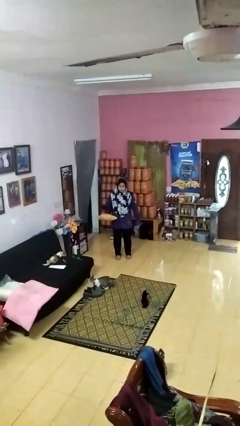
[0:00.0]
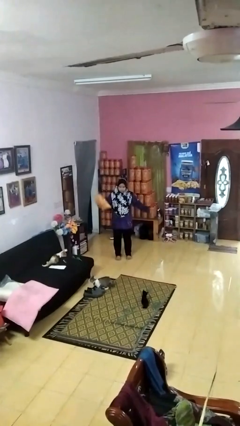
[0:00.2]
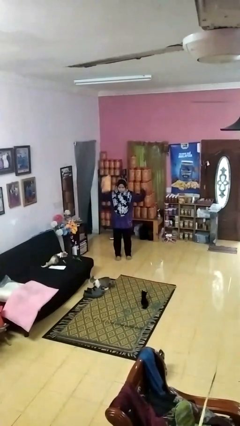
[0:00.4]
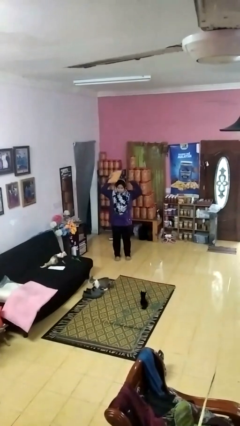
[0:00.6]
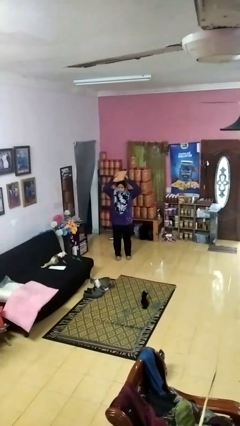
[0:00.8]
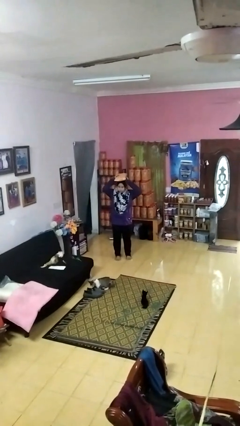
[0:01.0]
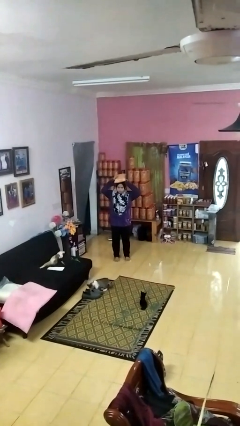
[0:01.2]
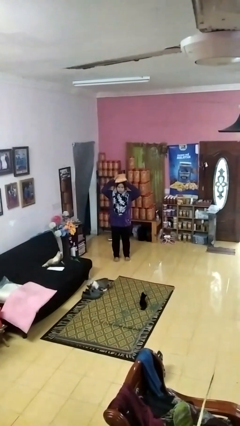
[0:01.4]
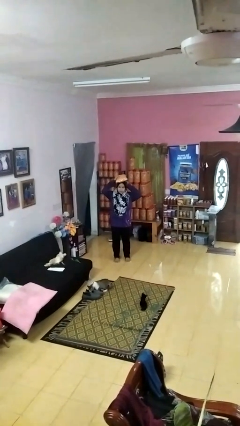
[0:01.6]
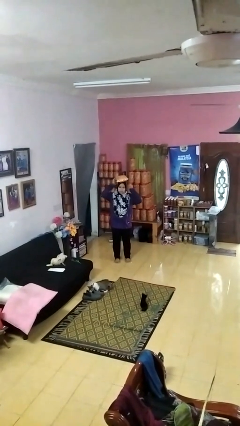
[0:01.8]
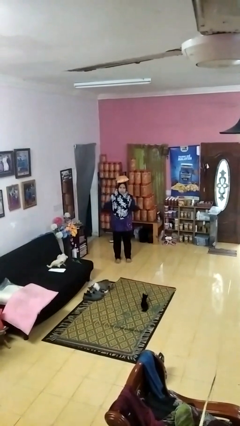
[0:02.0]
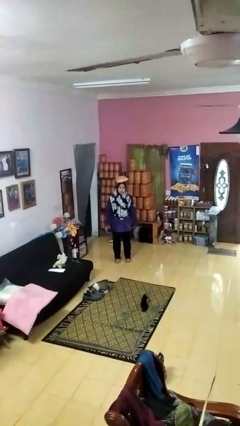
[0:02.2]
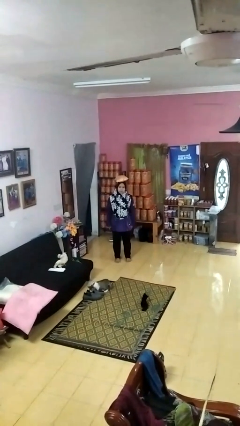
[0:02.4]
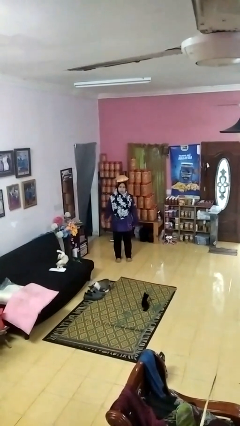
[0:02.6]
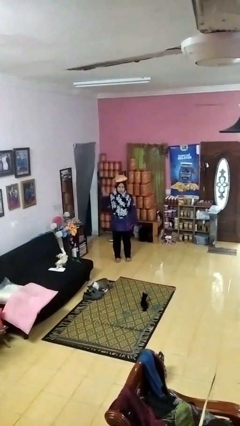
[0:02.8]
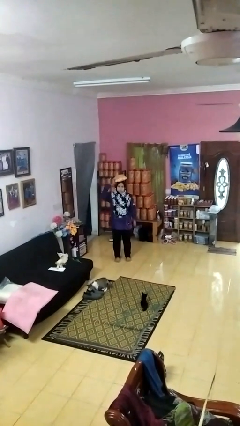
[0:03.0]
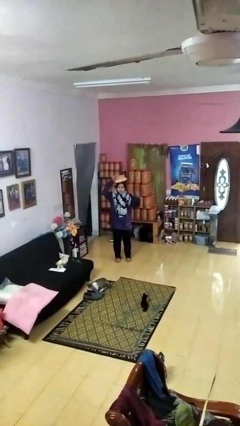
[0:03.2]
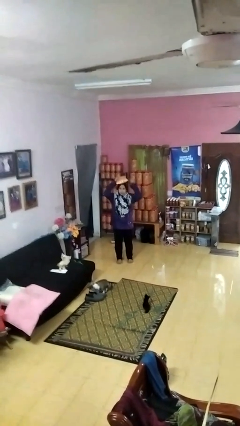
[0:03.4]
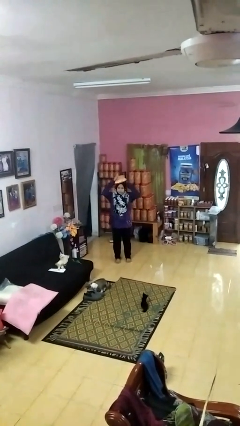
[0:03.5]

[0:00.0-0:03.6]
person holds object above head

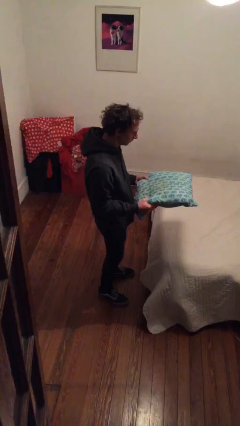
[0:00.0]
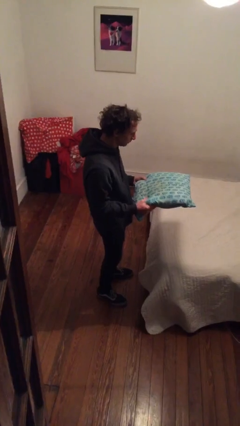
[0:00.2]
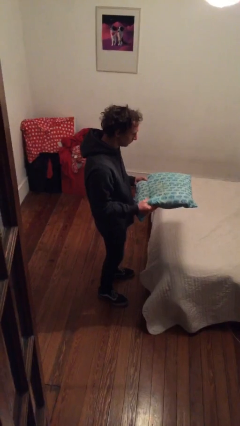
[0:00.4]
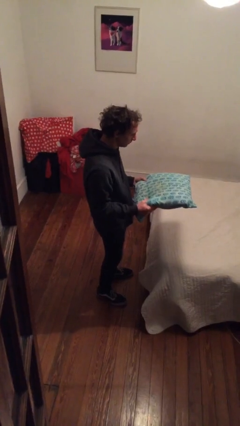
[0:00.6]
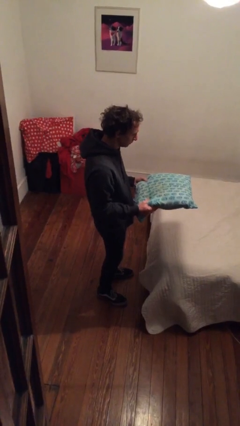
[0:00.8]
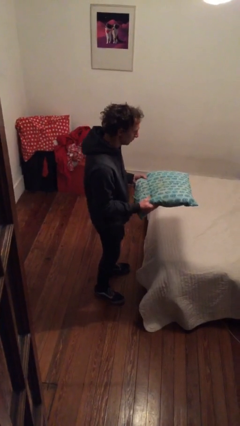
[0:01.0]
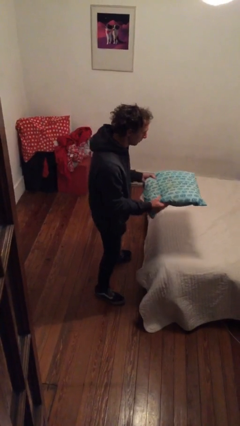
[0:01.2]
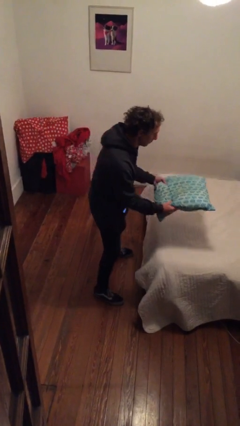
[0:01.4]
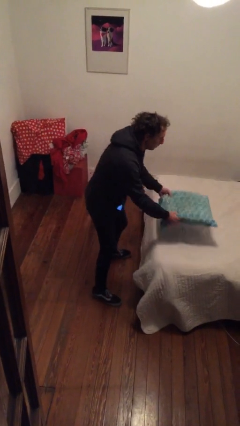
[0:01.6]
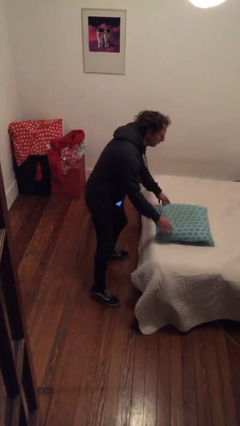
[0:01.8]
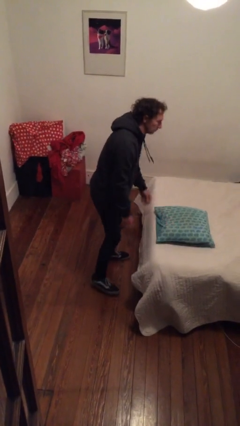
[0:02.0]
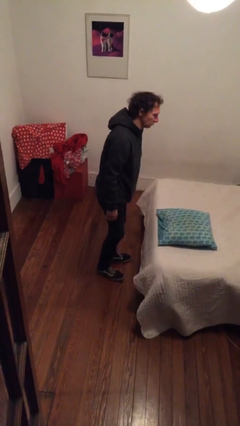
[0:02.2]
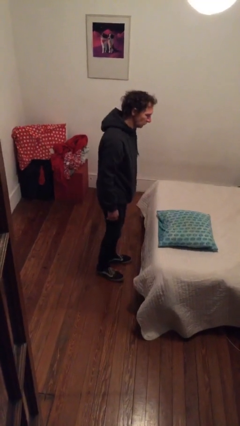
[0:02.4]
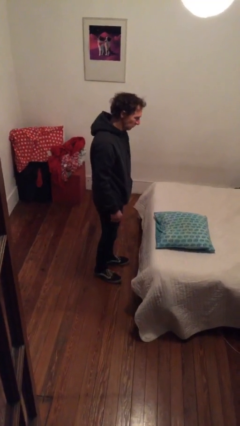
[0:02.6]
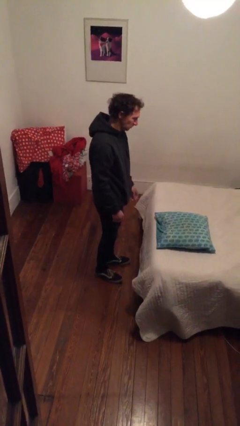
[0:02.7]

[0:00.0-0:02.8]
person puts down object on bed

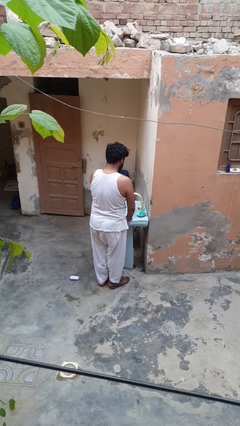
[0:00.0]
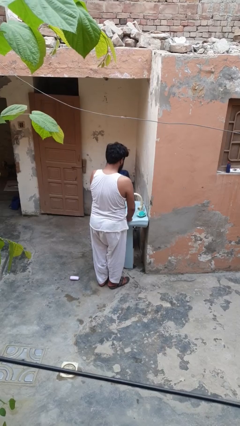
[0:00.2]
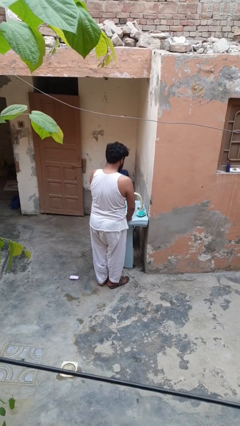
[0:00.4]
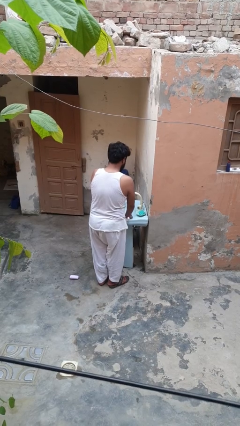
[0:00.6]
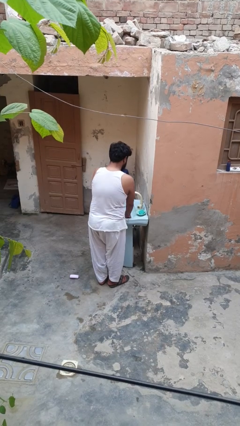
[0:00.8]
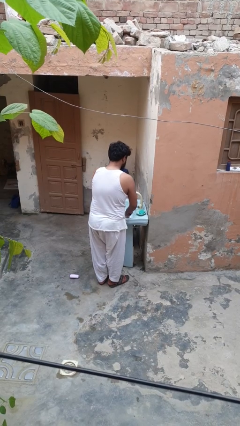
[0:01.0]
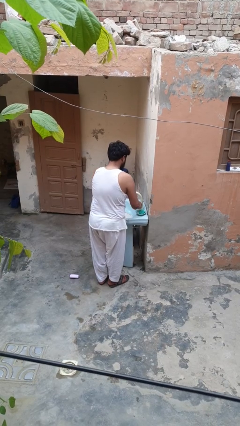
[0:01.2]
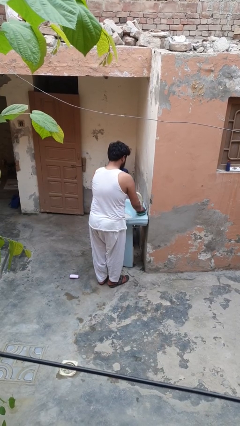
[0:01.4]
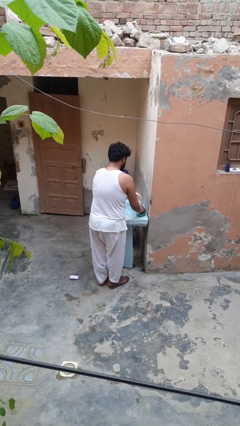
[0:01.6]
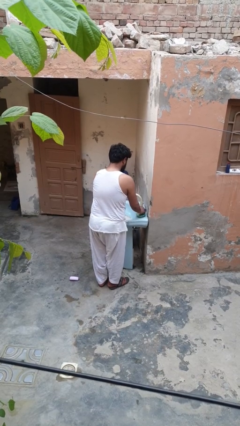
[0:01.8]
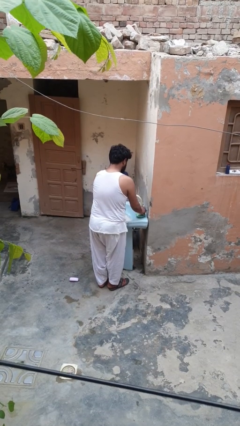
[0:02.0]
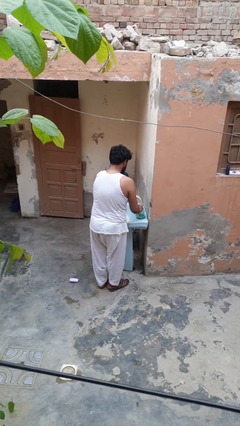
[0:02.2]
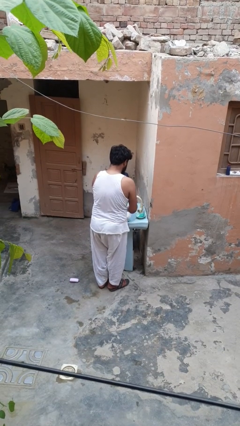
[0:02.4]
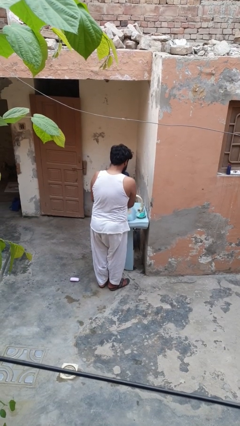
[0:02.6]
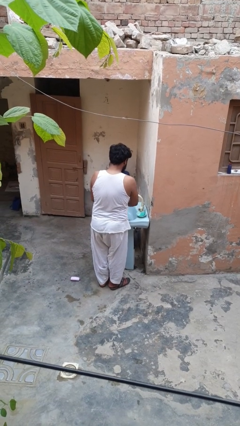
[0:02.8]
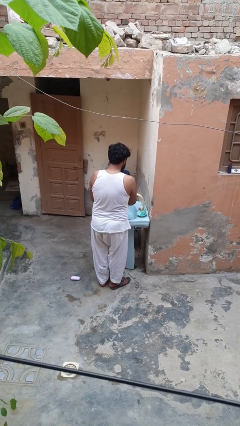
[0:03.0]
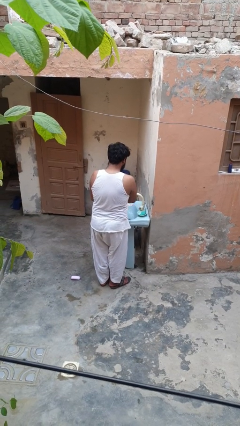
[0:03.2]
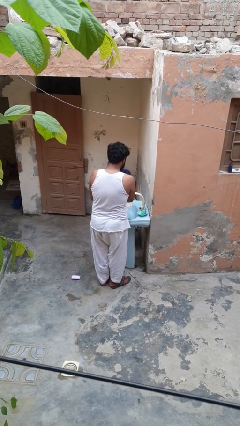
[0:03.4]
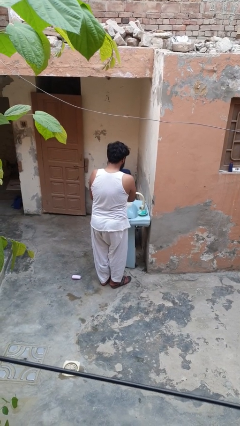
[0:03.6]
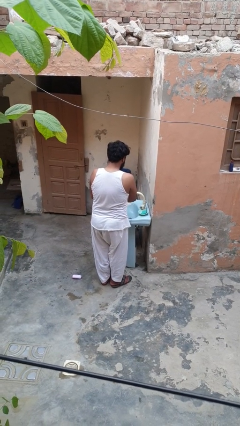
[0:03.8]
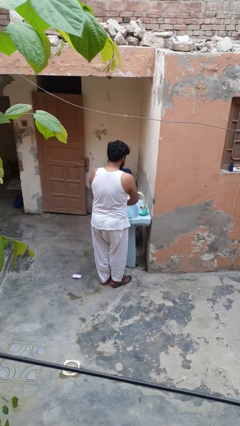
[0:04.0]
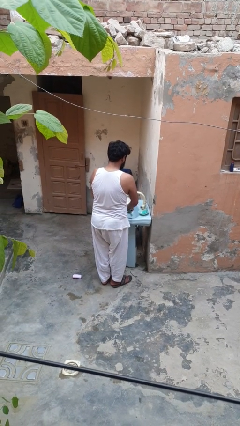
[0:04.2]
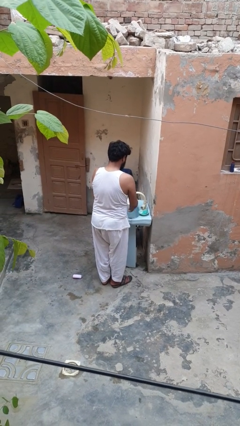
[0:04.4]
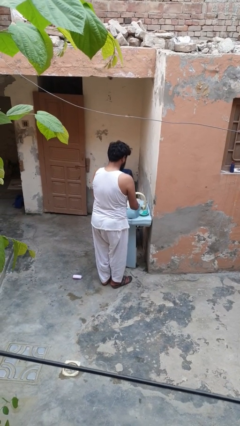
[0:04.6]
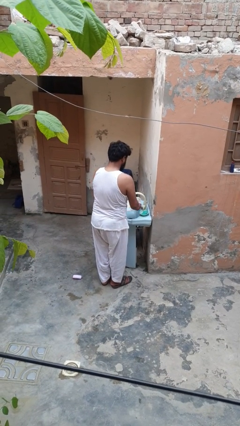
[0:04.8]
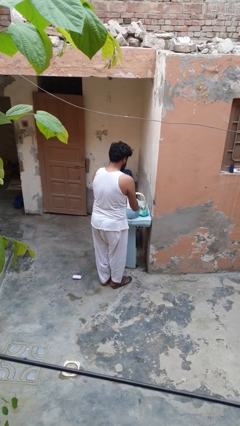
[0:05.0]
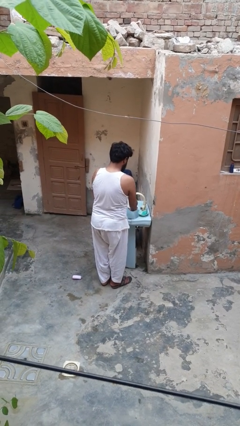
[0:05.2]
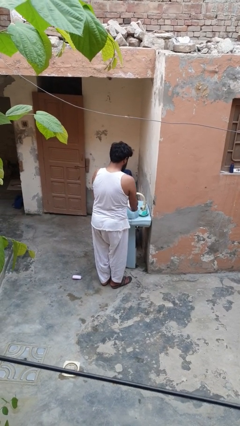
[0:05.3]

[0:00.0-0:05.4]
person washes dish

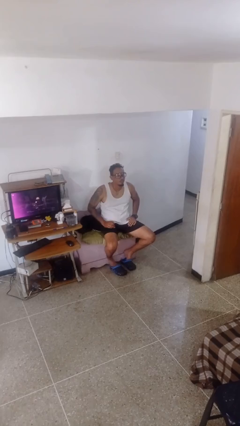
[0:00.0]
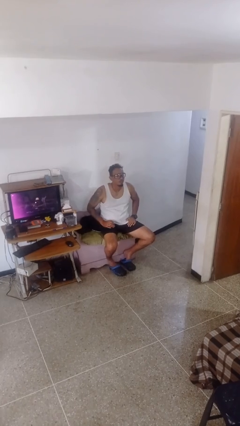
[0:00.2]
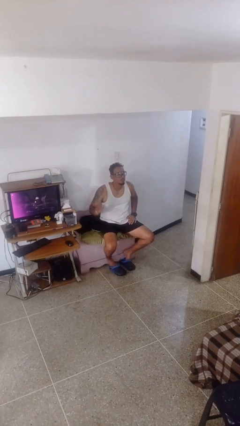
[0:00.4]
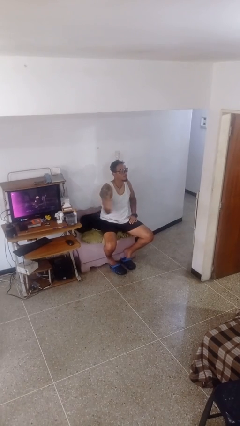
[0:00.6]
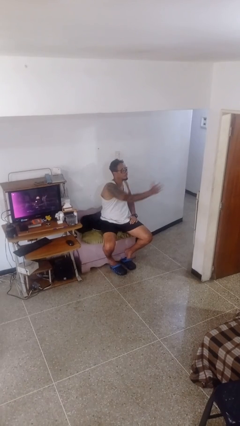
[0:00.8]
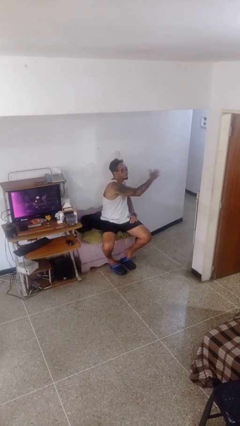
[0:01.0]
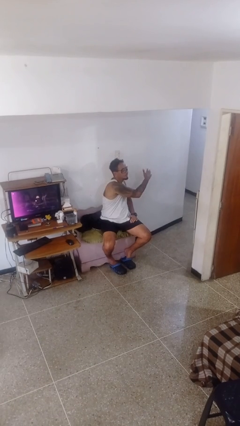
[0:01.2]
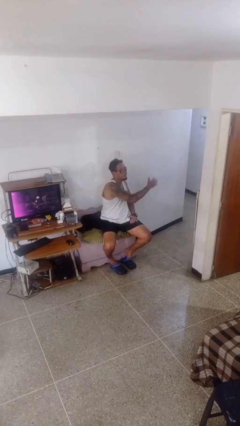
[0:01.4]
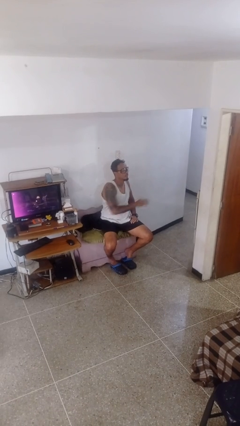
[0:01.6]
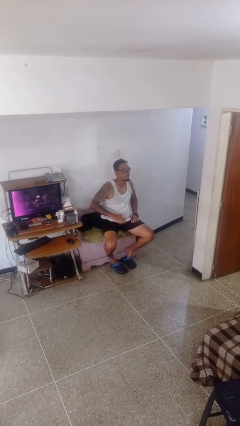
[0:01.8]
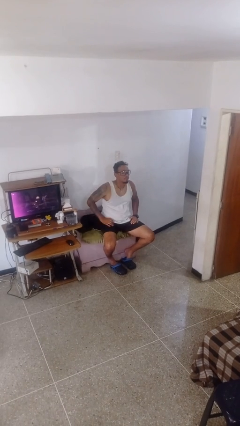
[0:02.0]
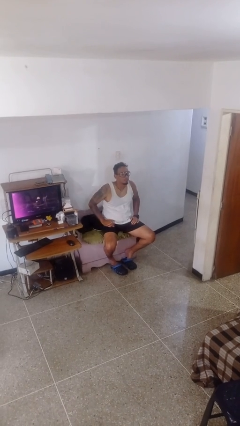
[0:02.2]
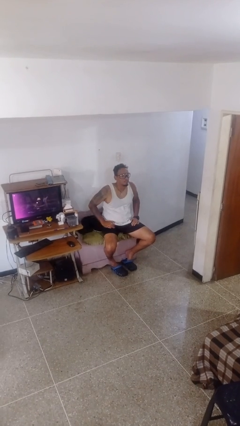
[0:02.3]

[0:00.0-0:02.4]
person gestures swipe left

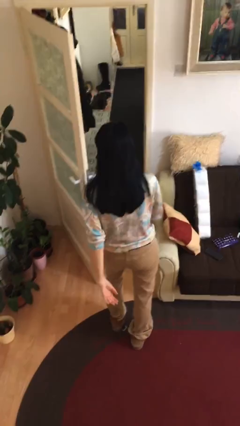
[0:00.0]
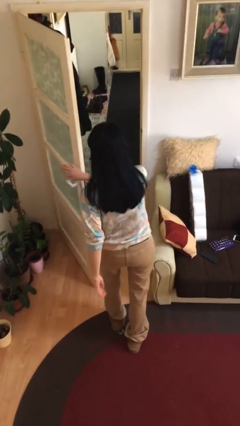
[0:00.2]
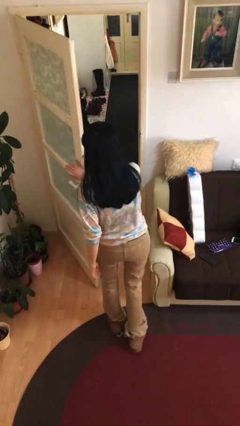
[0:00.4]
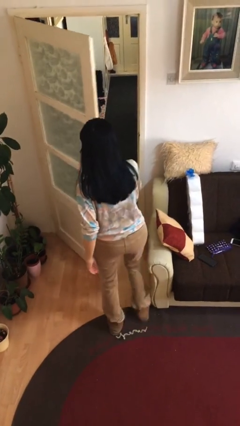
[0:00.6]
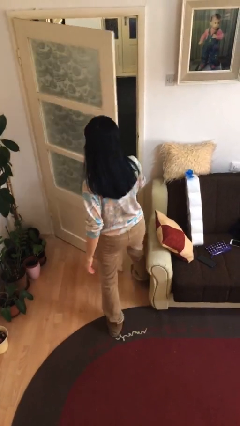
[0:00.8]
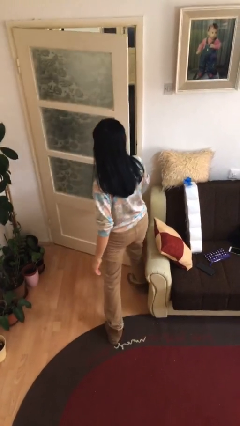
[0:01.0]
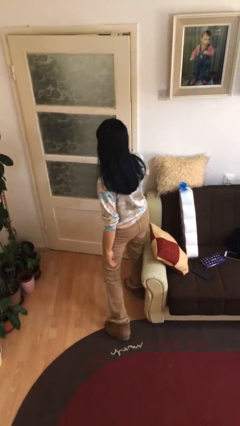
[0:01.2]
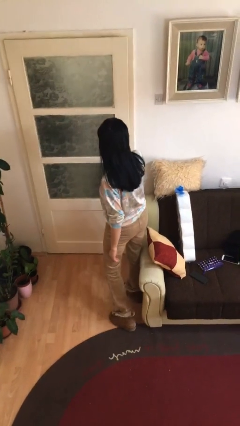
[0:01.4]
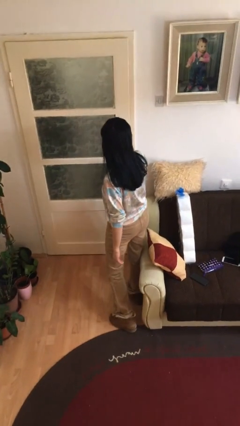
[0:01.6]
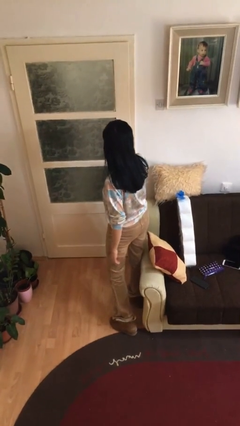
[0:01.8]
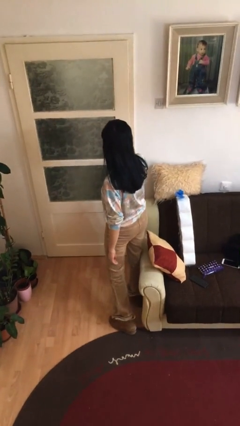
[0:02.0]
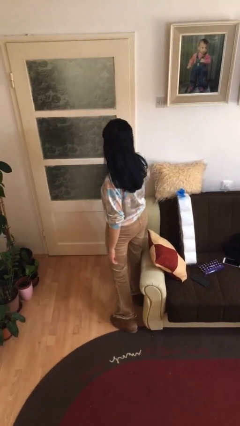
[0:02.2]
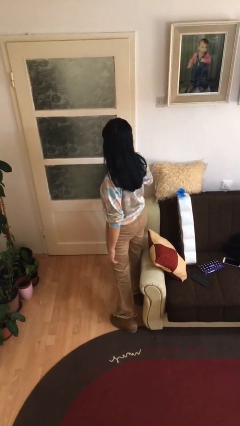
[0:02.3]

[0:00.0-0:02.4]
person closes facility door

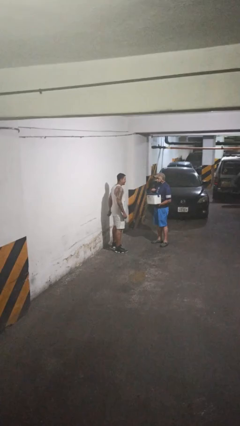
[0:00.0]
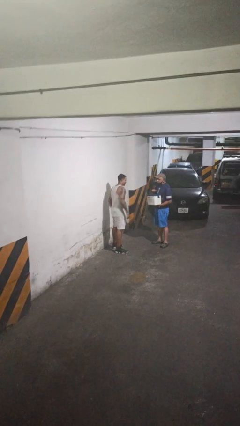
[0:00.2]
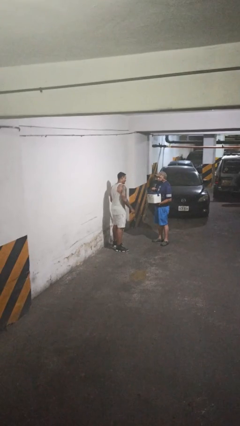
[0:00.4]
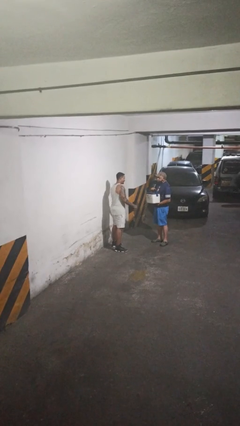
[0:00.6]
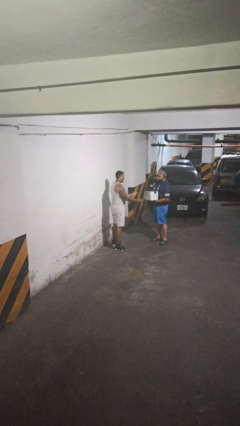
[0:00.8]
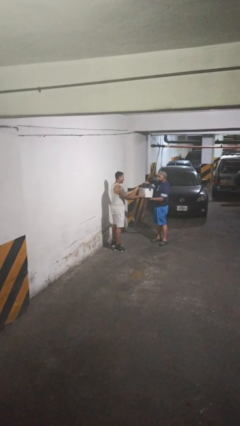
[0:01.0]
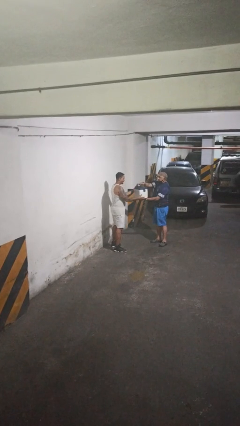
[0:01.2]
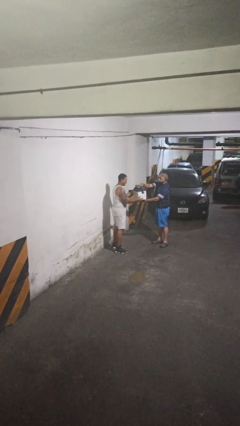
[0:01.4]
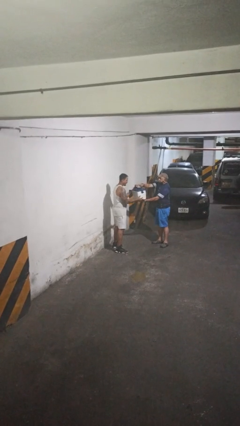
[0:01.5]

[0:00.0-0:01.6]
person transfers object to person
